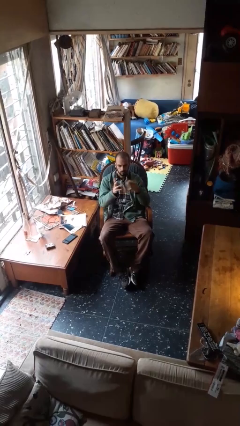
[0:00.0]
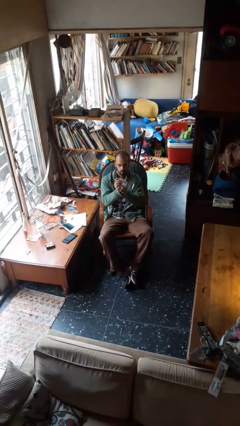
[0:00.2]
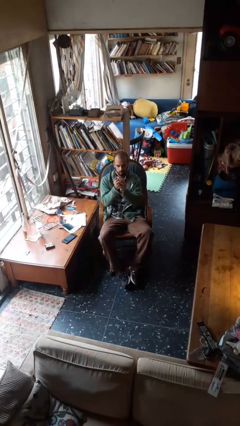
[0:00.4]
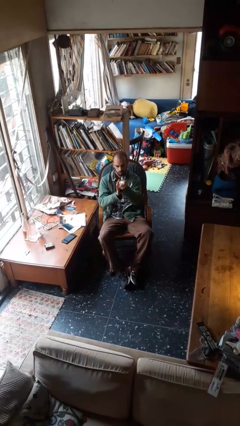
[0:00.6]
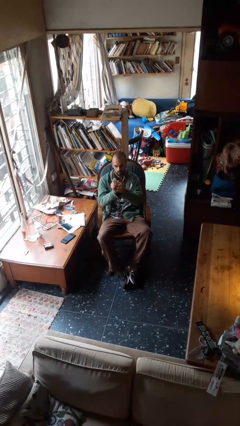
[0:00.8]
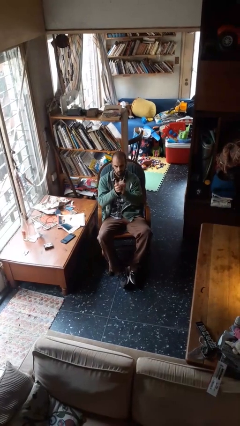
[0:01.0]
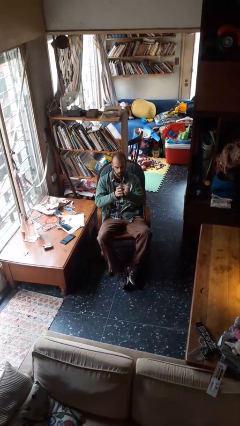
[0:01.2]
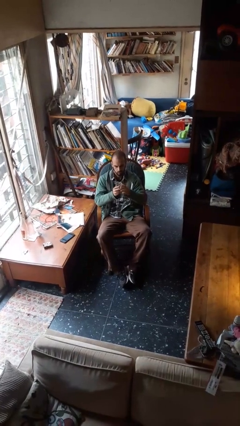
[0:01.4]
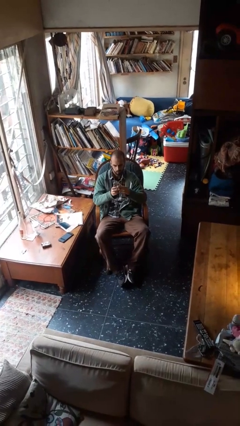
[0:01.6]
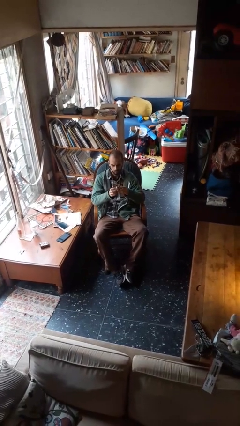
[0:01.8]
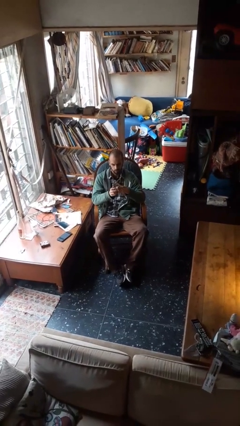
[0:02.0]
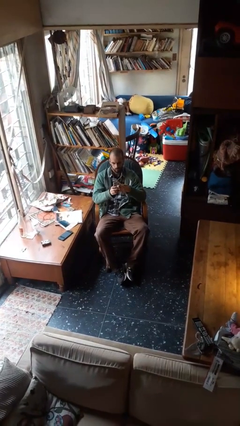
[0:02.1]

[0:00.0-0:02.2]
person crumples paper

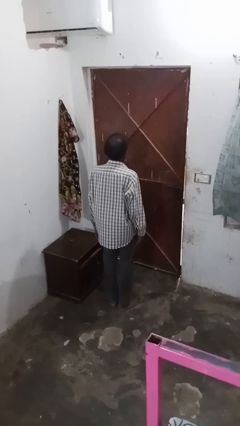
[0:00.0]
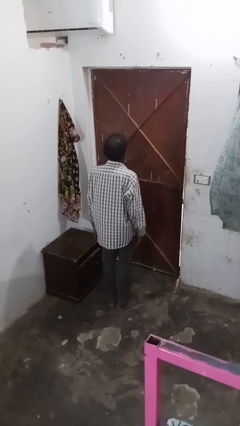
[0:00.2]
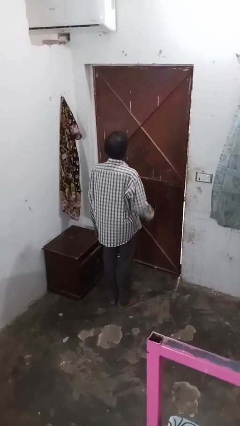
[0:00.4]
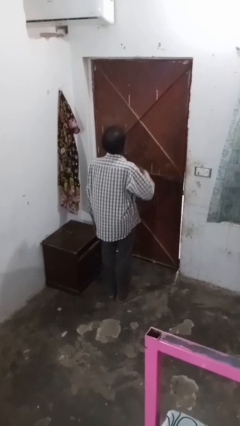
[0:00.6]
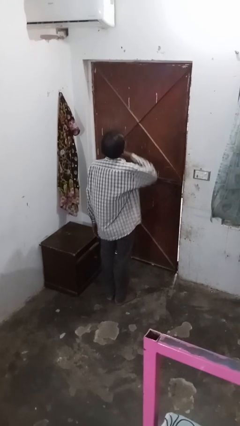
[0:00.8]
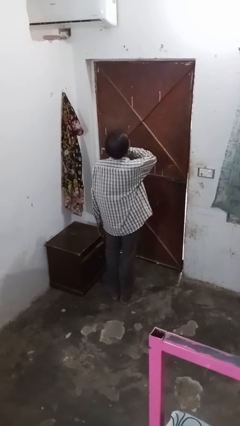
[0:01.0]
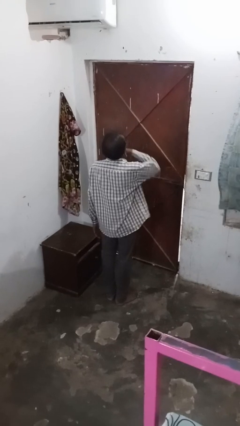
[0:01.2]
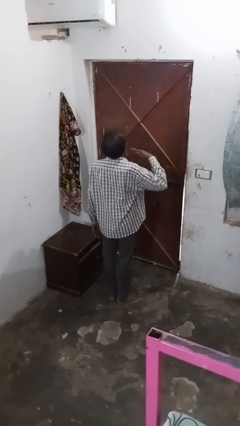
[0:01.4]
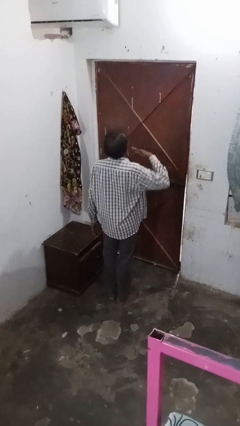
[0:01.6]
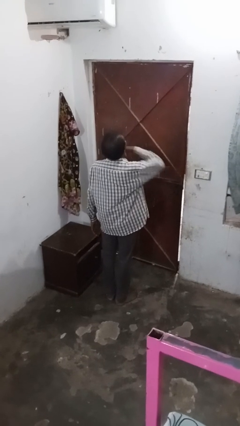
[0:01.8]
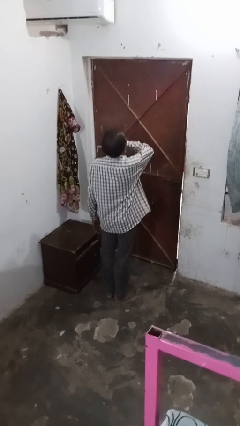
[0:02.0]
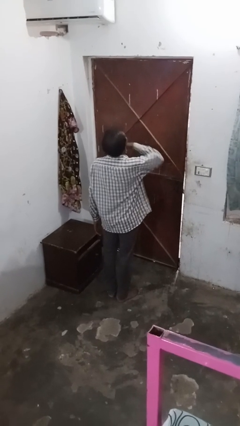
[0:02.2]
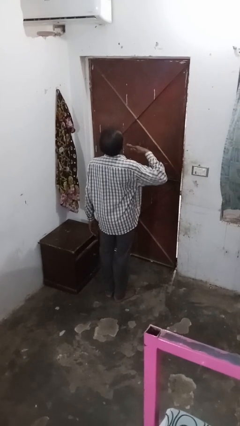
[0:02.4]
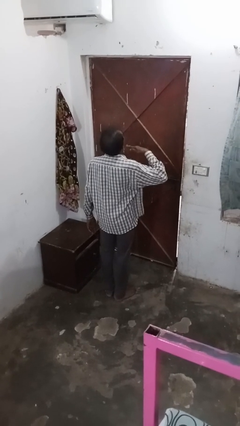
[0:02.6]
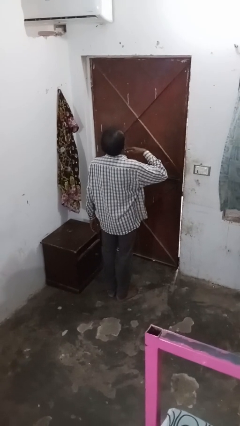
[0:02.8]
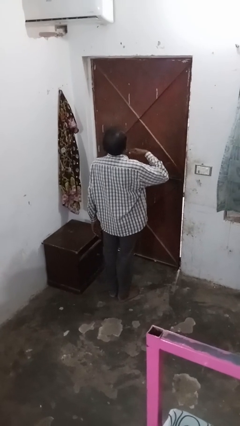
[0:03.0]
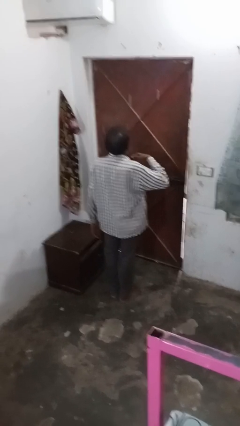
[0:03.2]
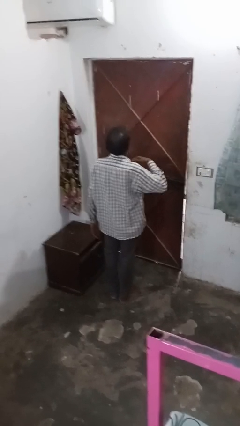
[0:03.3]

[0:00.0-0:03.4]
person gestures cut

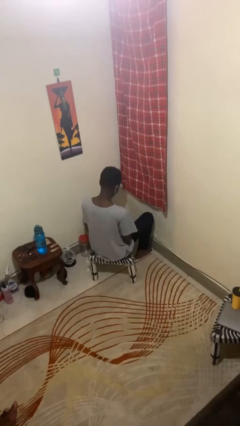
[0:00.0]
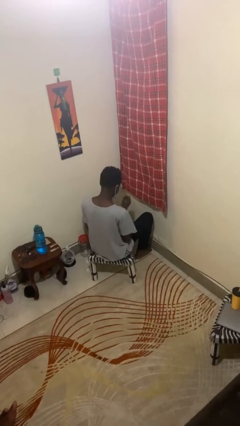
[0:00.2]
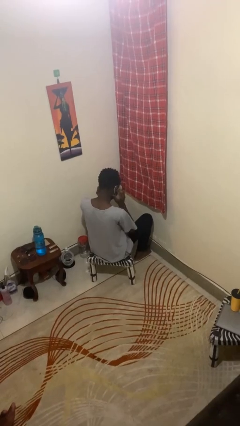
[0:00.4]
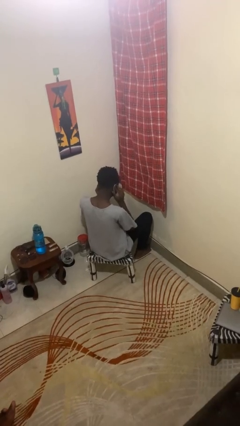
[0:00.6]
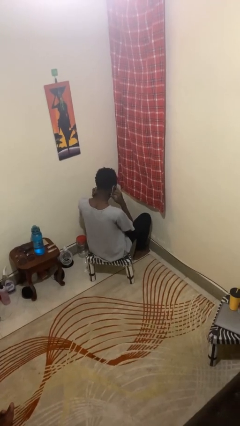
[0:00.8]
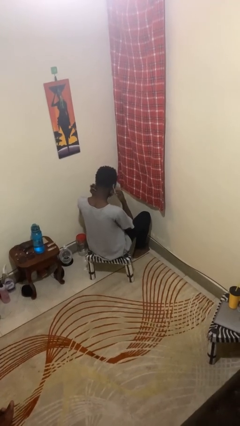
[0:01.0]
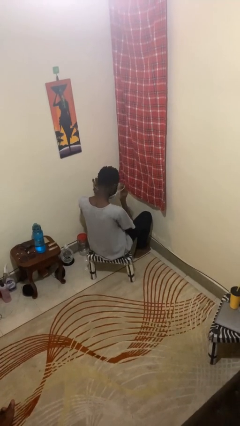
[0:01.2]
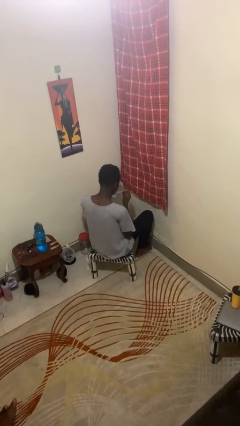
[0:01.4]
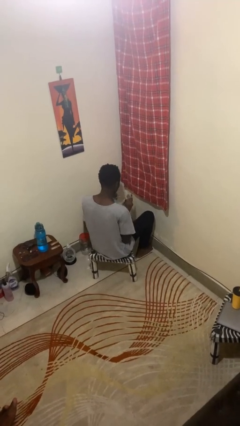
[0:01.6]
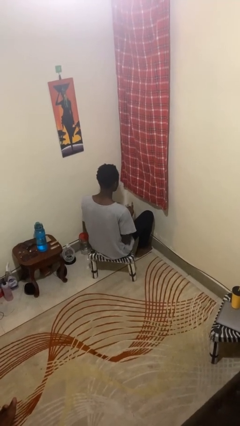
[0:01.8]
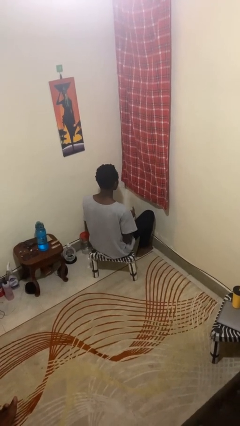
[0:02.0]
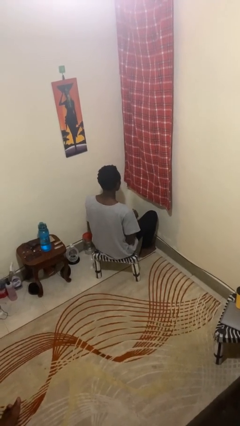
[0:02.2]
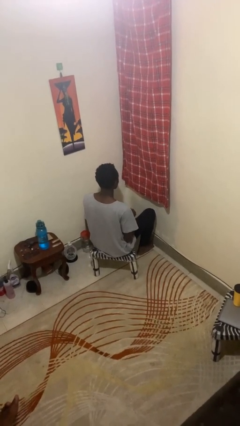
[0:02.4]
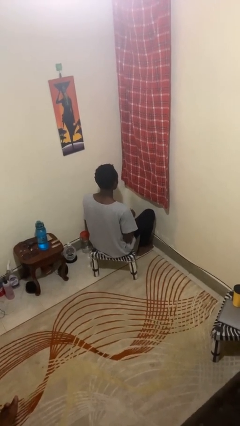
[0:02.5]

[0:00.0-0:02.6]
person takes off facemask

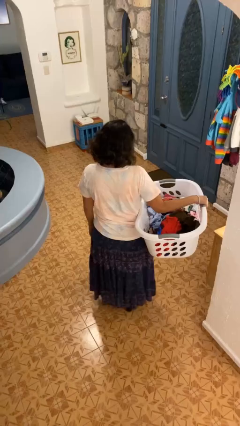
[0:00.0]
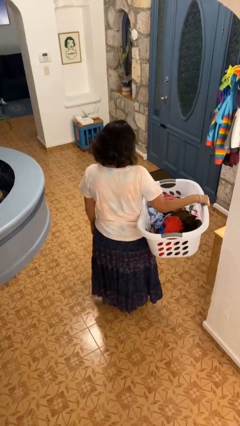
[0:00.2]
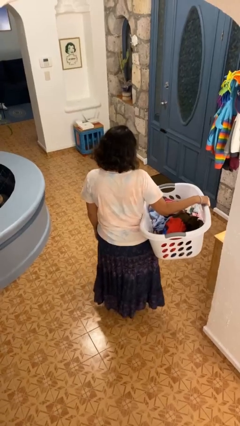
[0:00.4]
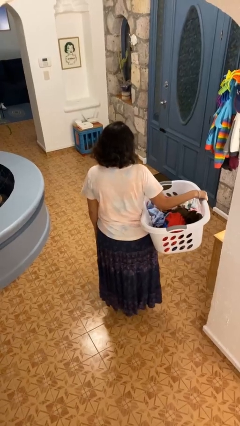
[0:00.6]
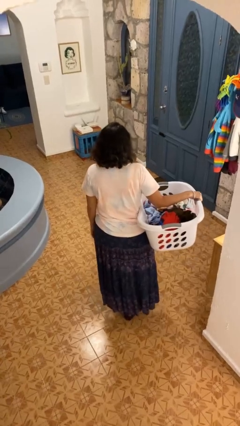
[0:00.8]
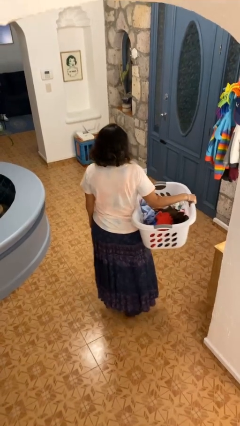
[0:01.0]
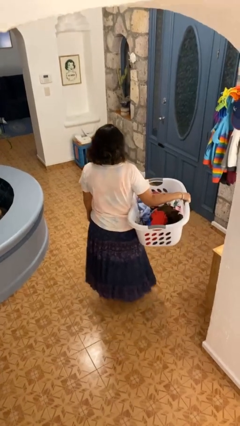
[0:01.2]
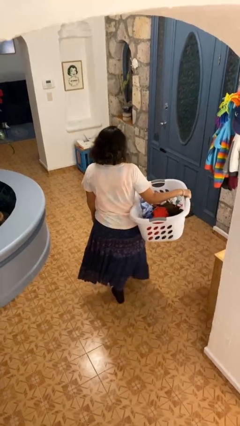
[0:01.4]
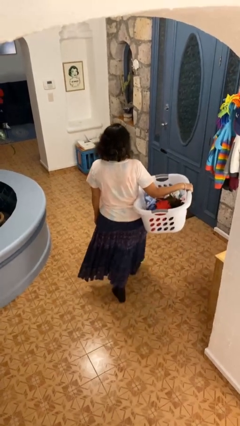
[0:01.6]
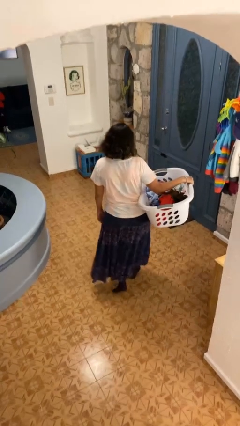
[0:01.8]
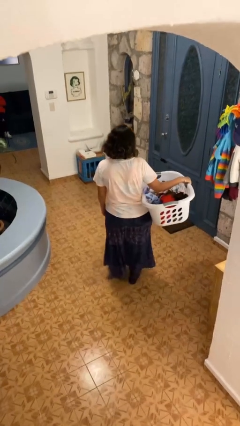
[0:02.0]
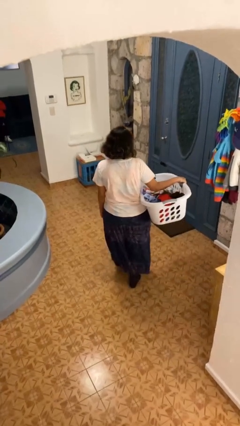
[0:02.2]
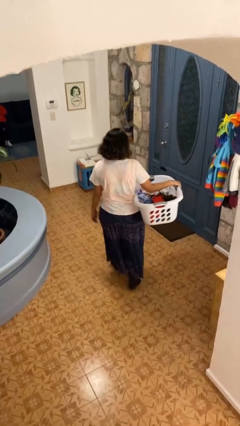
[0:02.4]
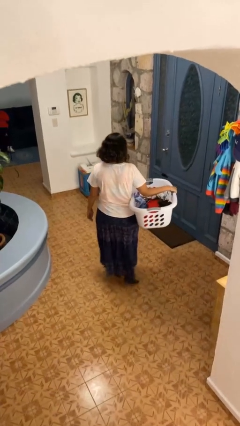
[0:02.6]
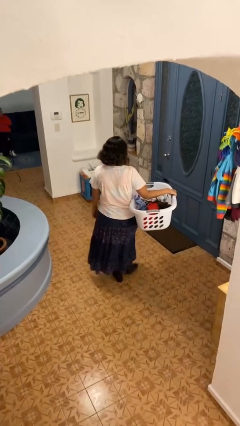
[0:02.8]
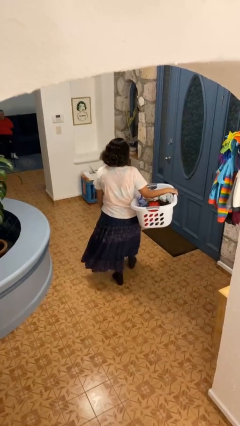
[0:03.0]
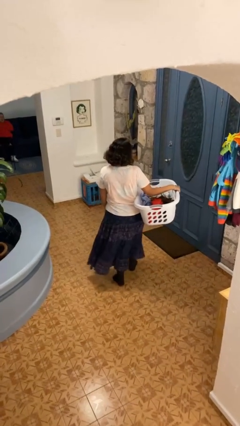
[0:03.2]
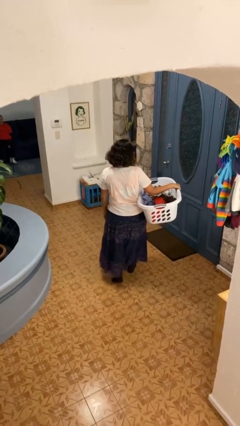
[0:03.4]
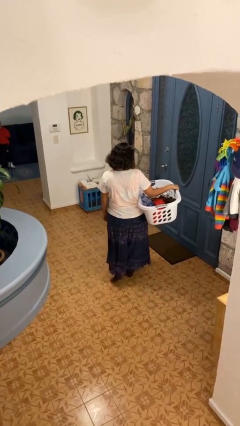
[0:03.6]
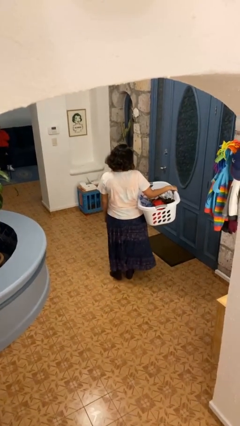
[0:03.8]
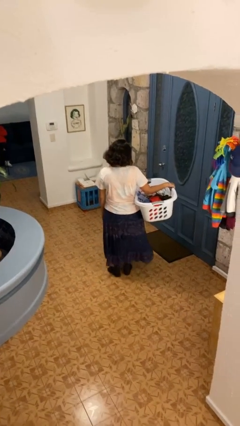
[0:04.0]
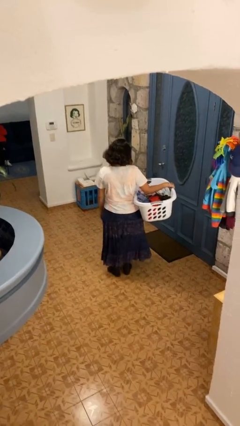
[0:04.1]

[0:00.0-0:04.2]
person carries laundry basket

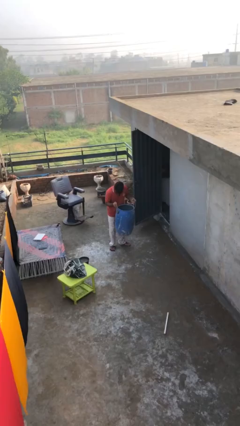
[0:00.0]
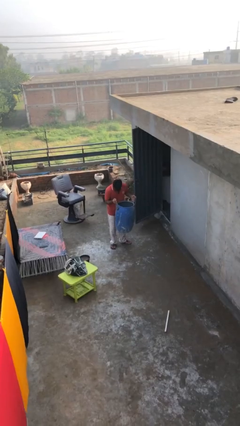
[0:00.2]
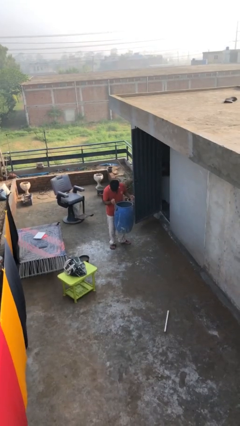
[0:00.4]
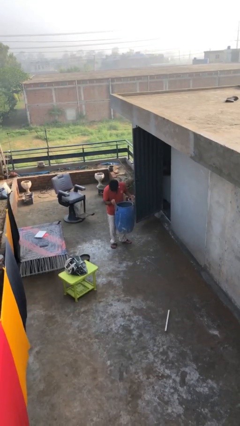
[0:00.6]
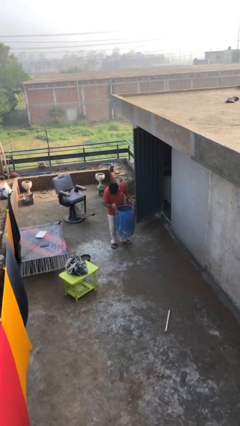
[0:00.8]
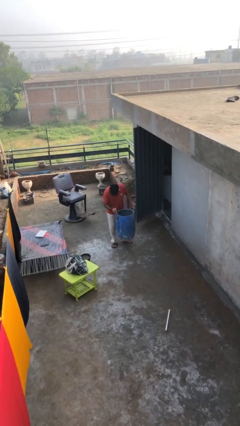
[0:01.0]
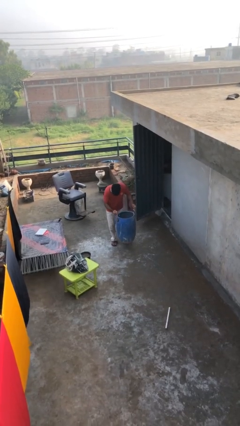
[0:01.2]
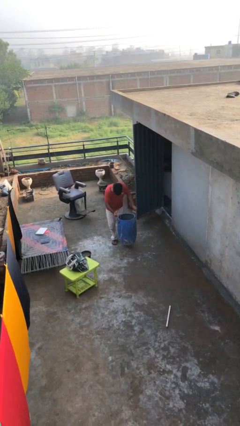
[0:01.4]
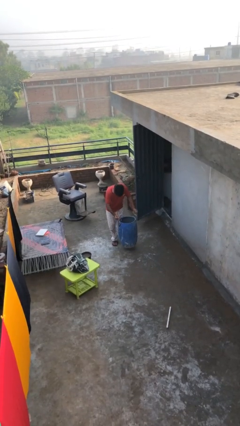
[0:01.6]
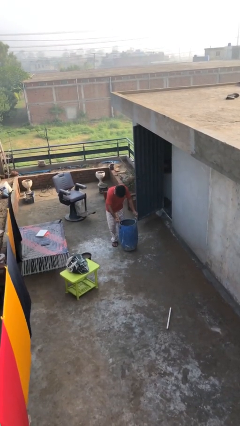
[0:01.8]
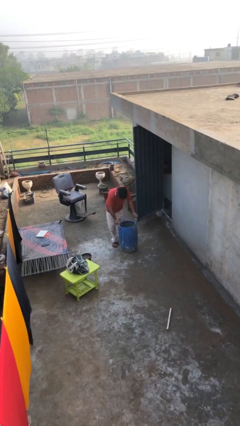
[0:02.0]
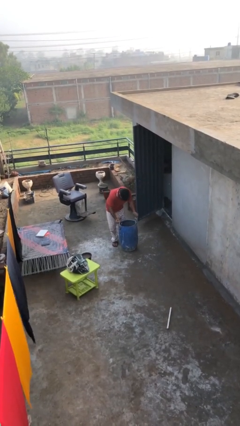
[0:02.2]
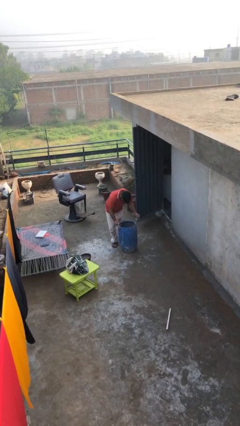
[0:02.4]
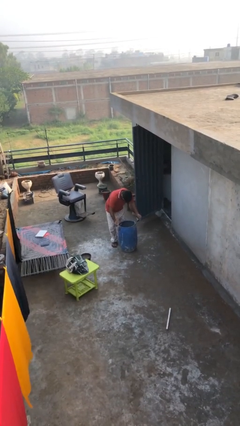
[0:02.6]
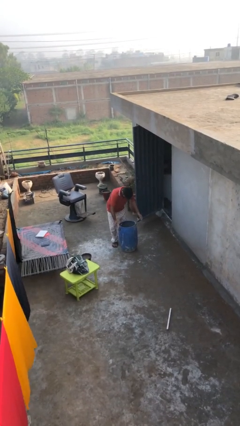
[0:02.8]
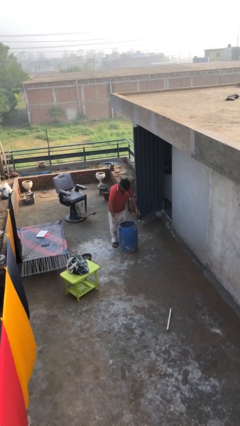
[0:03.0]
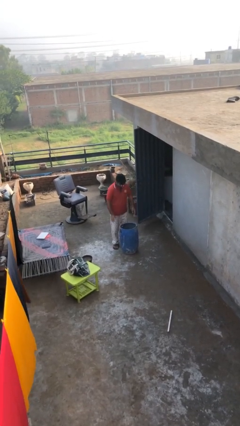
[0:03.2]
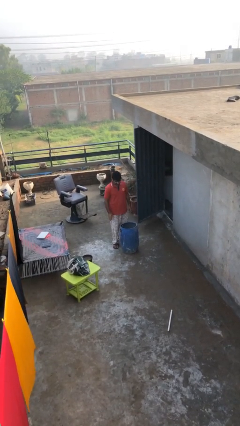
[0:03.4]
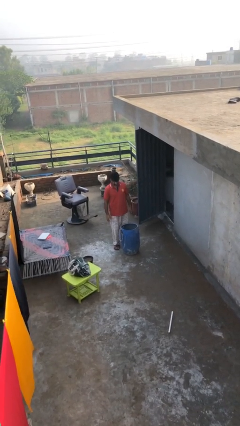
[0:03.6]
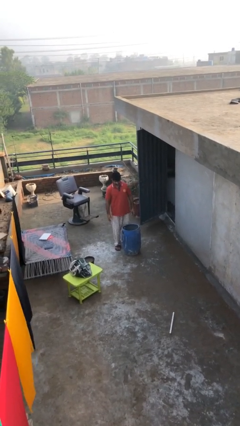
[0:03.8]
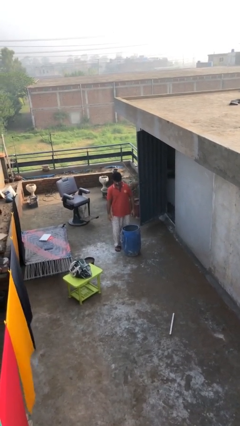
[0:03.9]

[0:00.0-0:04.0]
person puts down object on floor

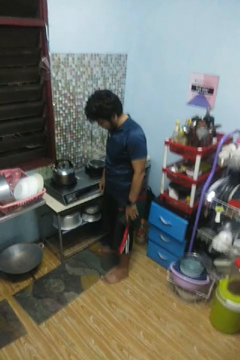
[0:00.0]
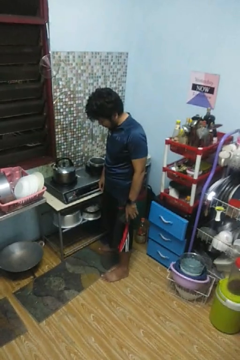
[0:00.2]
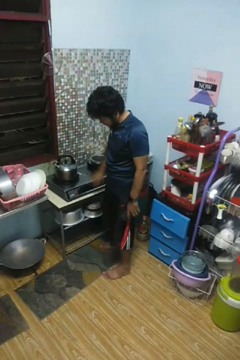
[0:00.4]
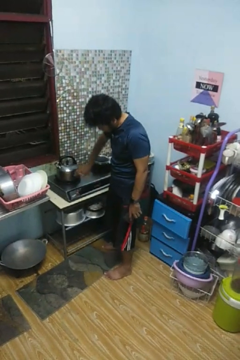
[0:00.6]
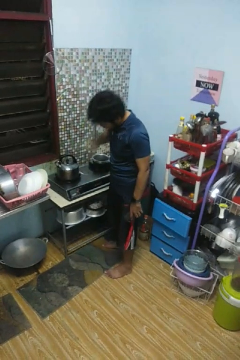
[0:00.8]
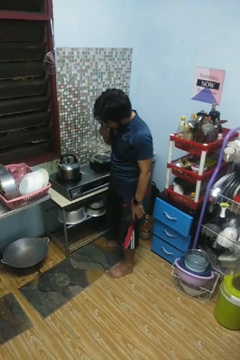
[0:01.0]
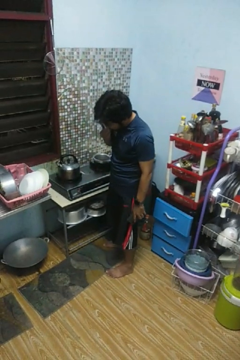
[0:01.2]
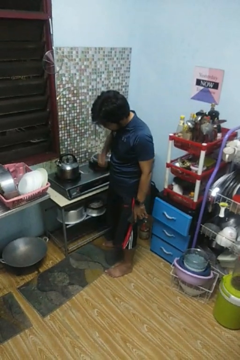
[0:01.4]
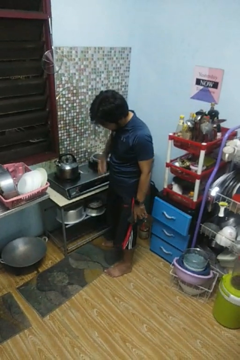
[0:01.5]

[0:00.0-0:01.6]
person burns hand
